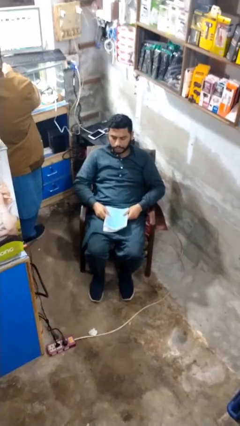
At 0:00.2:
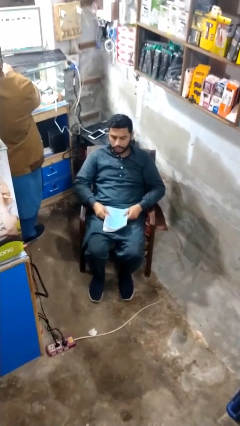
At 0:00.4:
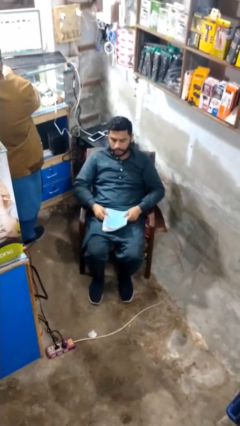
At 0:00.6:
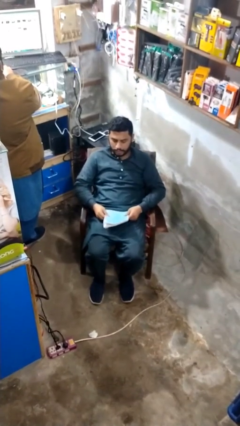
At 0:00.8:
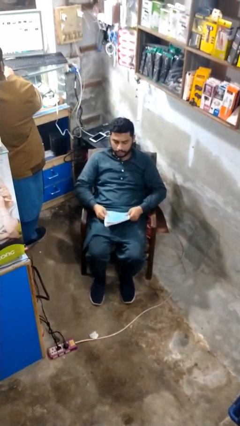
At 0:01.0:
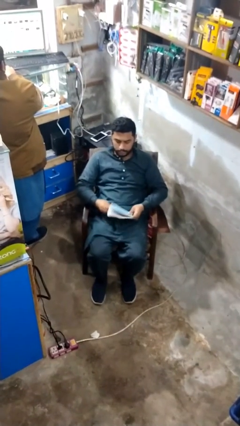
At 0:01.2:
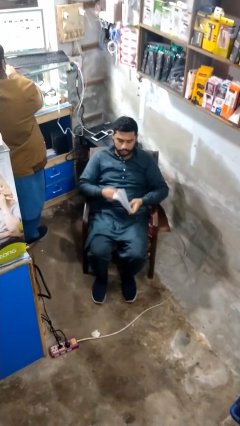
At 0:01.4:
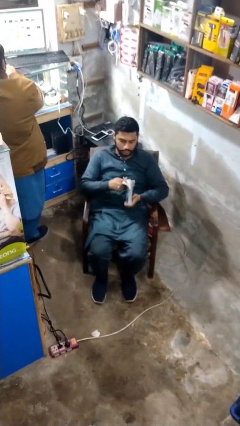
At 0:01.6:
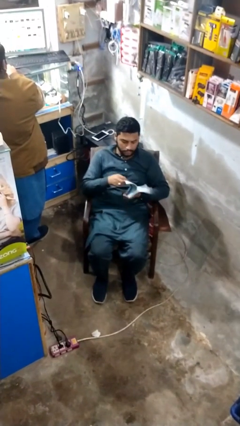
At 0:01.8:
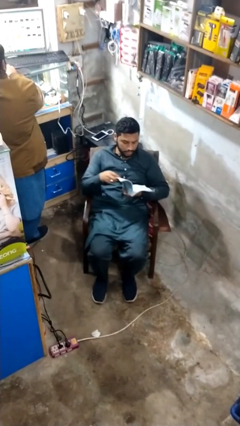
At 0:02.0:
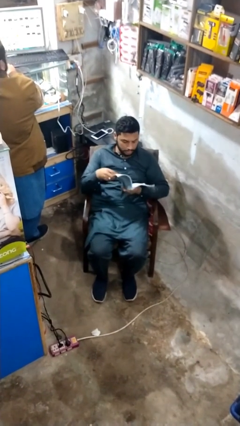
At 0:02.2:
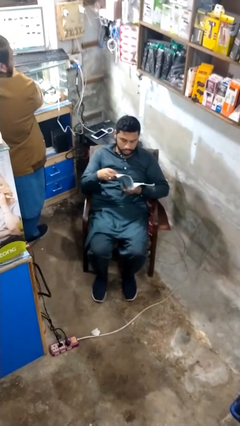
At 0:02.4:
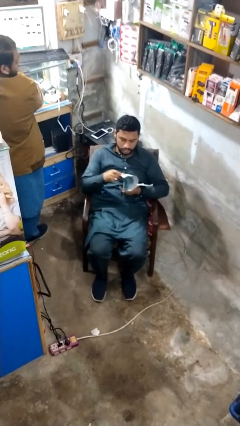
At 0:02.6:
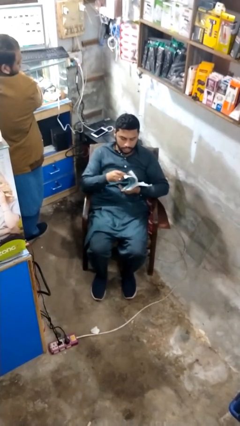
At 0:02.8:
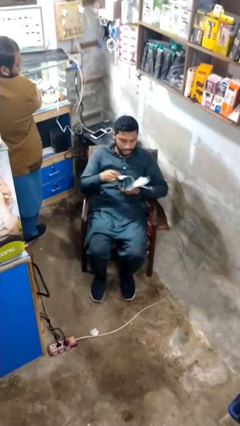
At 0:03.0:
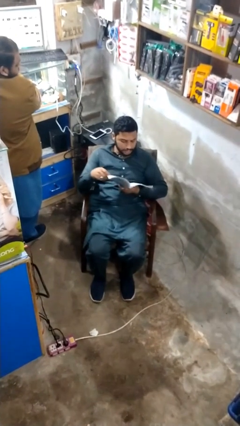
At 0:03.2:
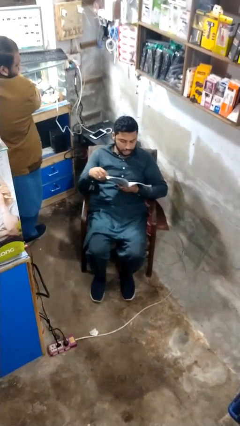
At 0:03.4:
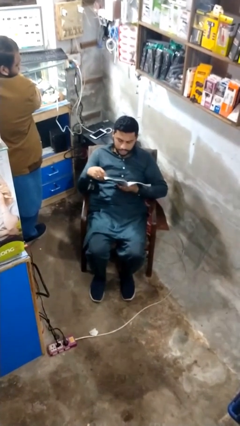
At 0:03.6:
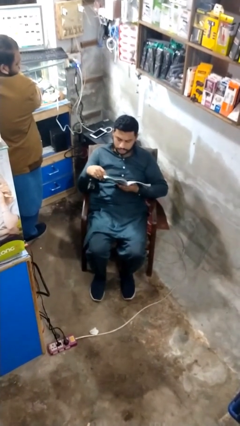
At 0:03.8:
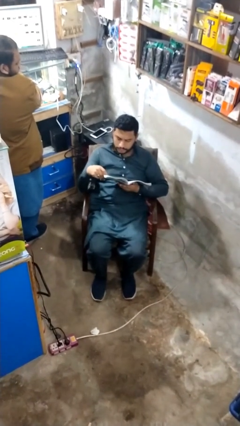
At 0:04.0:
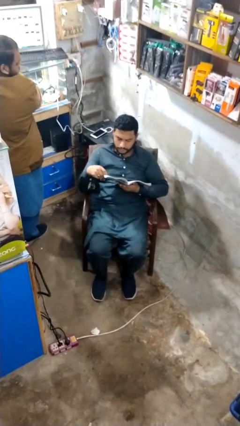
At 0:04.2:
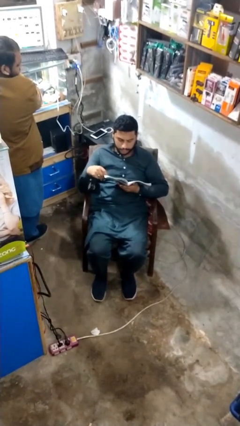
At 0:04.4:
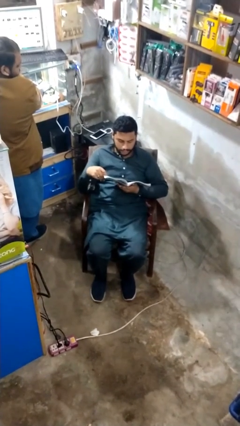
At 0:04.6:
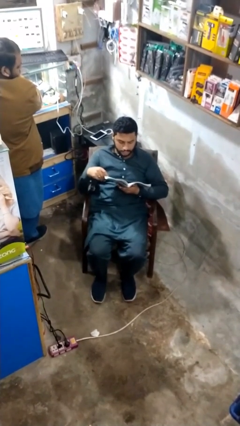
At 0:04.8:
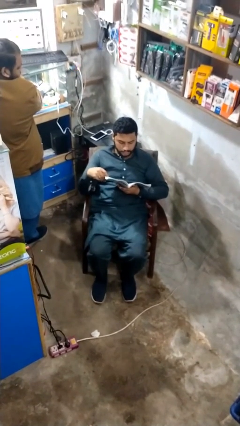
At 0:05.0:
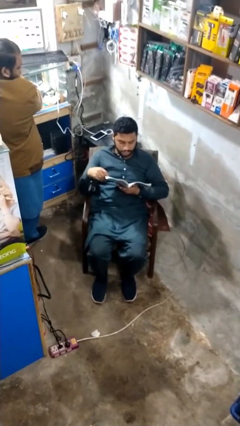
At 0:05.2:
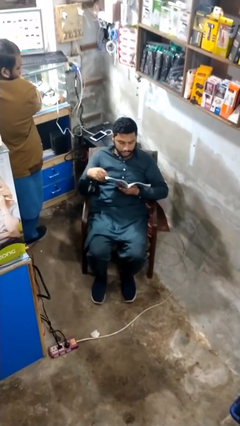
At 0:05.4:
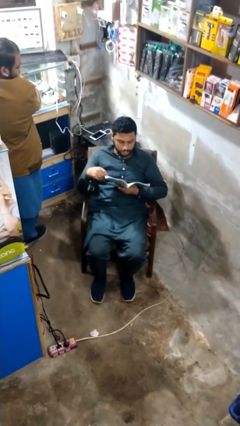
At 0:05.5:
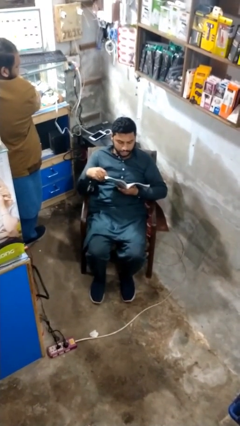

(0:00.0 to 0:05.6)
person reads document

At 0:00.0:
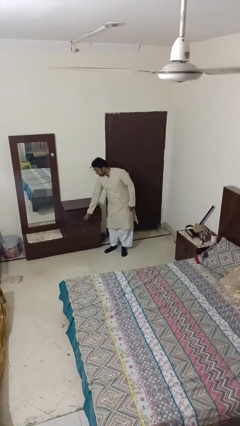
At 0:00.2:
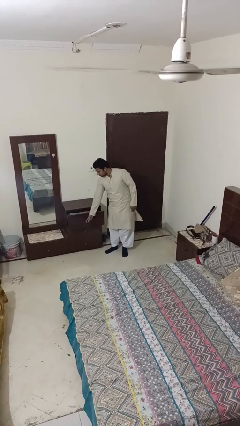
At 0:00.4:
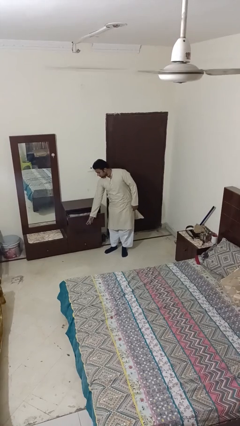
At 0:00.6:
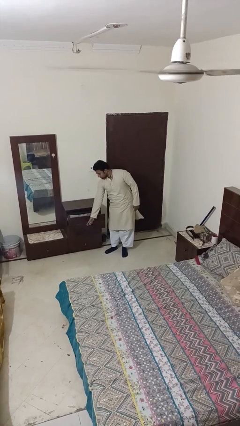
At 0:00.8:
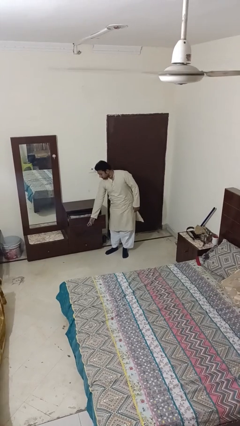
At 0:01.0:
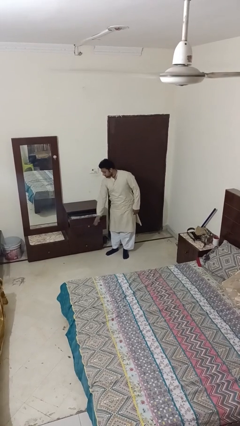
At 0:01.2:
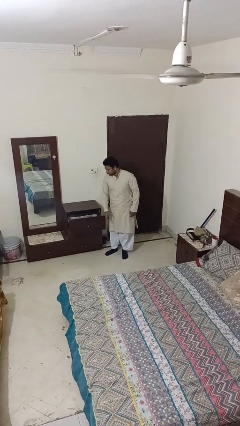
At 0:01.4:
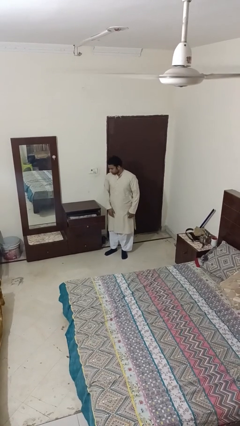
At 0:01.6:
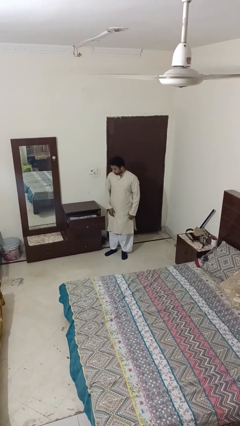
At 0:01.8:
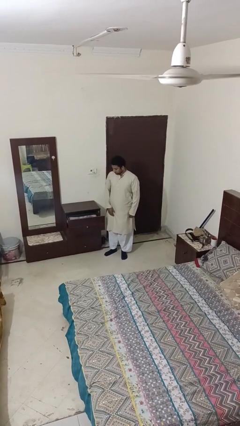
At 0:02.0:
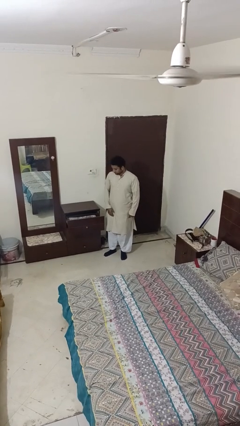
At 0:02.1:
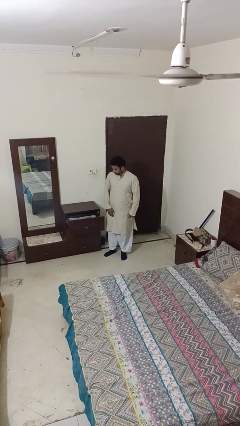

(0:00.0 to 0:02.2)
person opens dresser drawer

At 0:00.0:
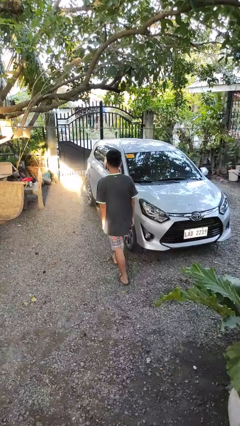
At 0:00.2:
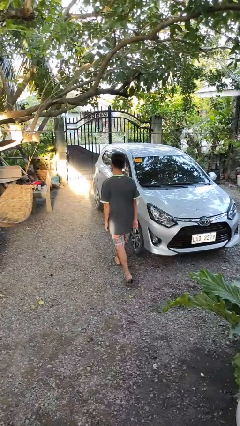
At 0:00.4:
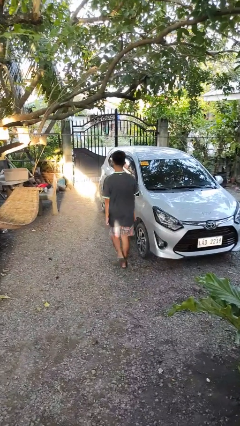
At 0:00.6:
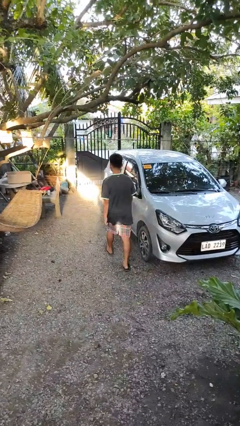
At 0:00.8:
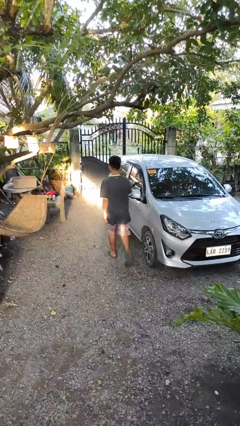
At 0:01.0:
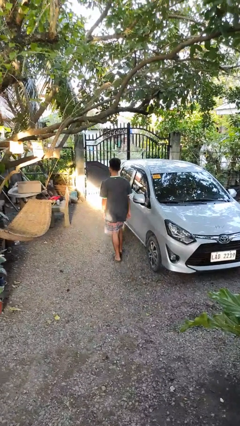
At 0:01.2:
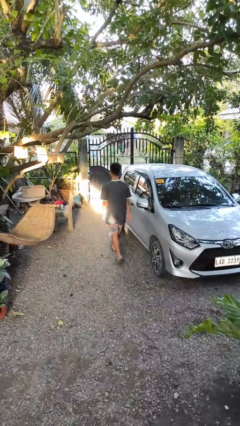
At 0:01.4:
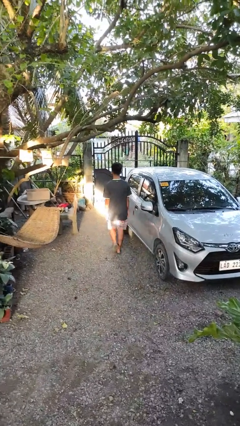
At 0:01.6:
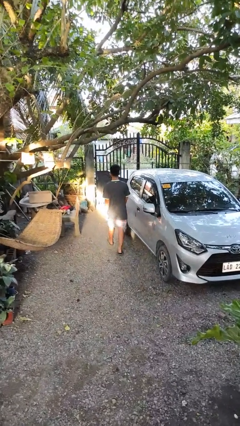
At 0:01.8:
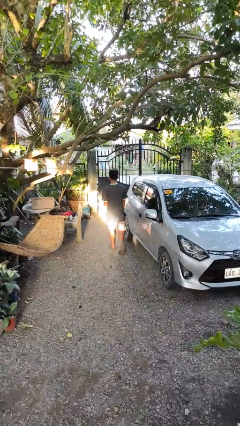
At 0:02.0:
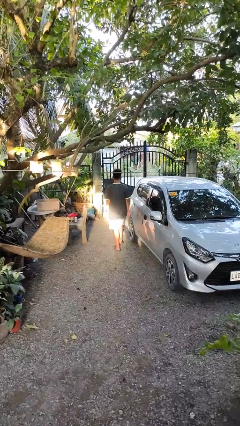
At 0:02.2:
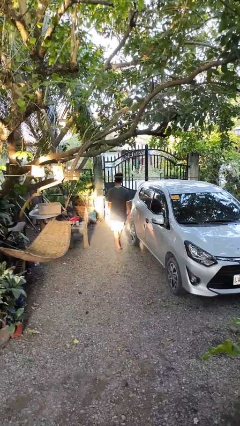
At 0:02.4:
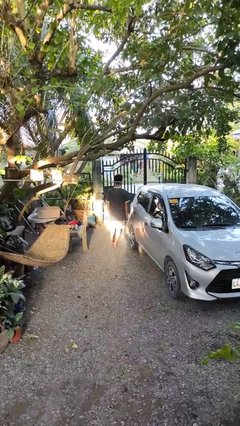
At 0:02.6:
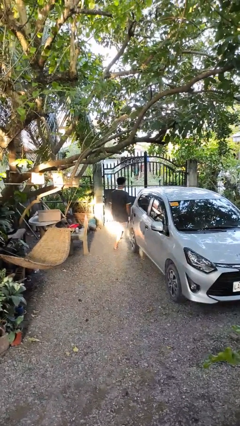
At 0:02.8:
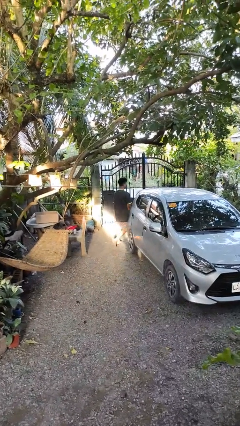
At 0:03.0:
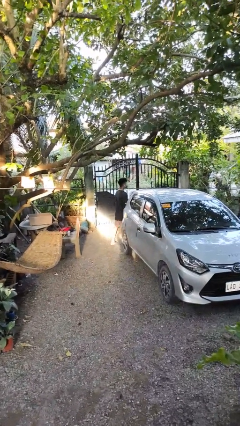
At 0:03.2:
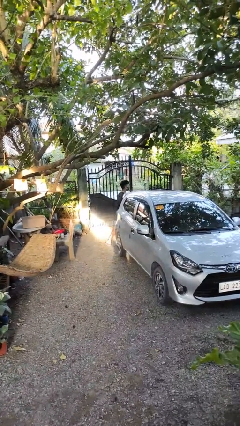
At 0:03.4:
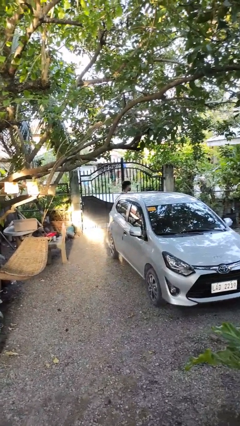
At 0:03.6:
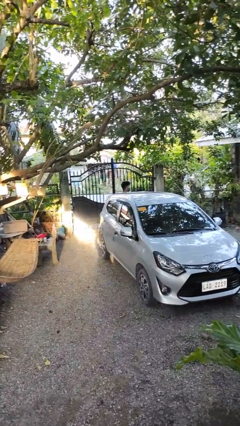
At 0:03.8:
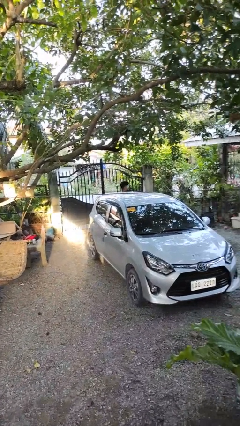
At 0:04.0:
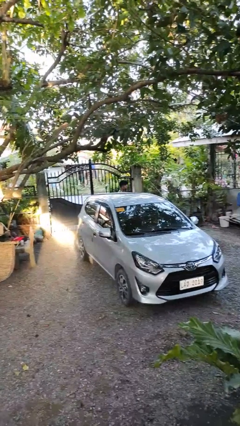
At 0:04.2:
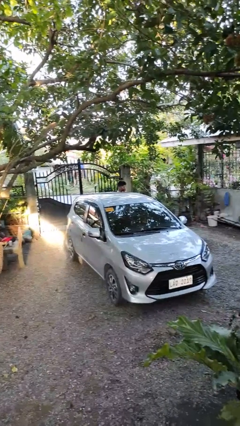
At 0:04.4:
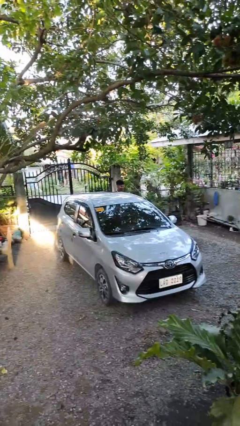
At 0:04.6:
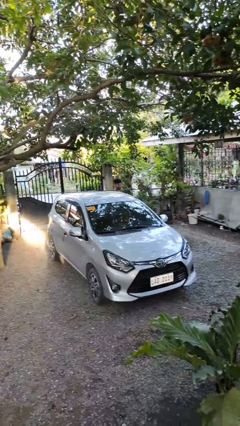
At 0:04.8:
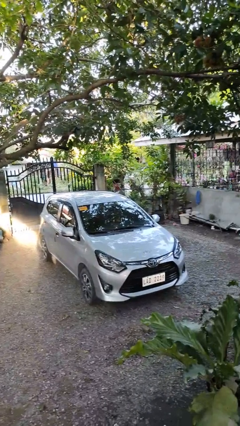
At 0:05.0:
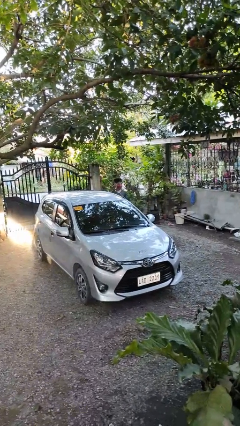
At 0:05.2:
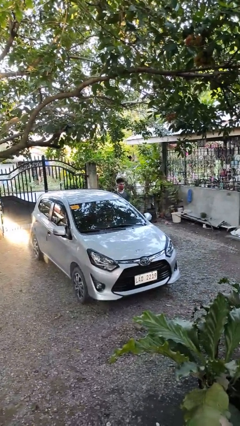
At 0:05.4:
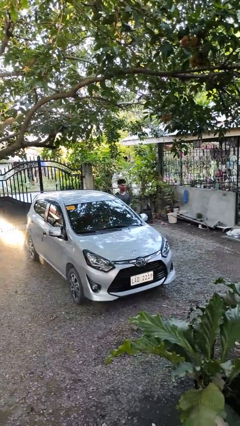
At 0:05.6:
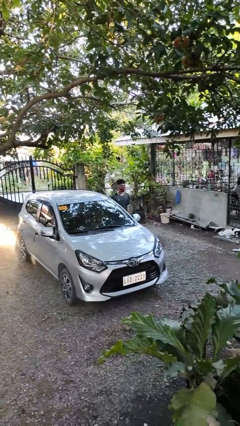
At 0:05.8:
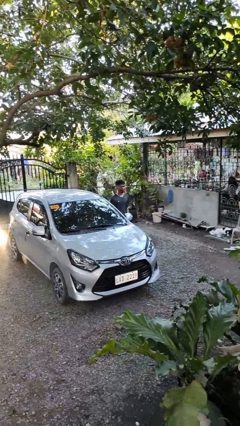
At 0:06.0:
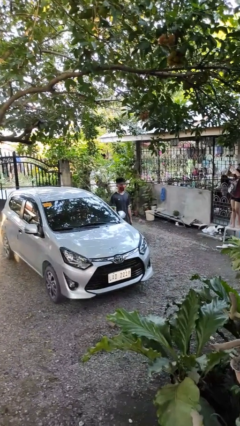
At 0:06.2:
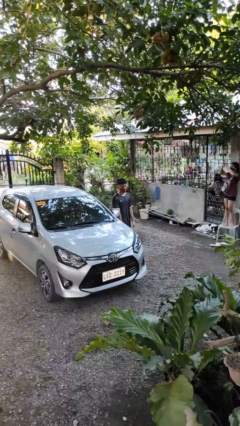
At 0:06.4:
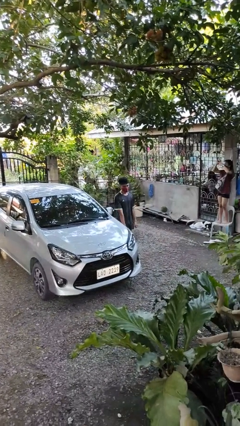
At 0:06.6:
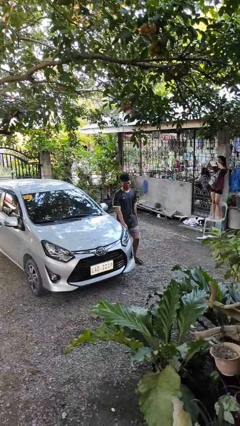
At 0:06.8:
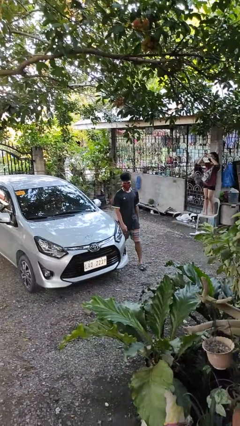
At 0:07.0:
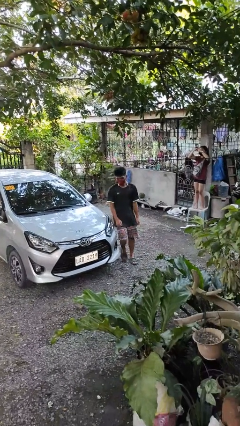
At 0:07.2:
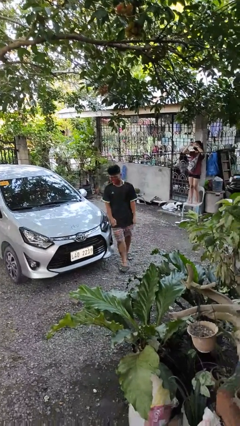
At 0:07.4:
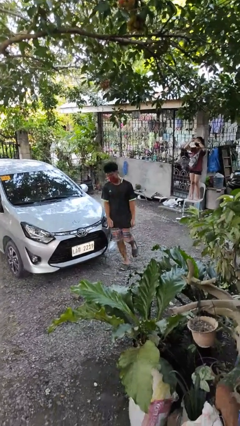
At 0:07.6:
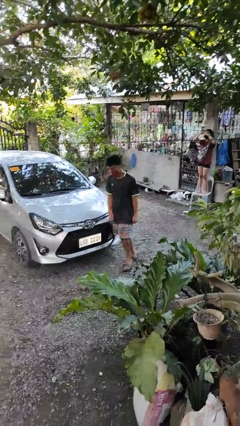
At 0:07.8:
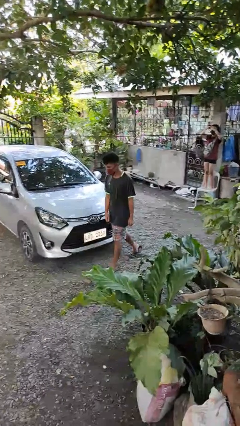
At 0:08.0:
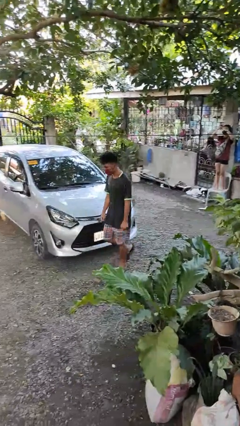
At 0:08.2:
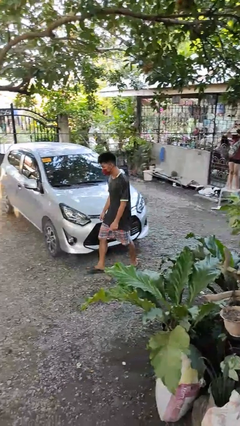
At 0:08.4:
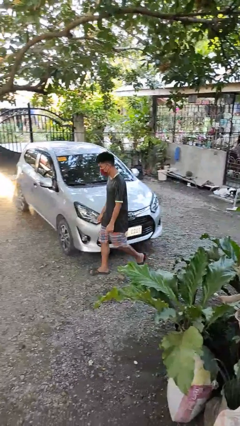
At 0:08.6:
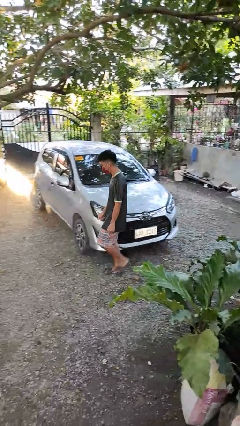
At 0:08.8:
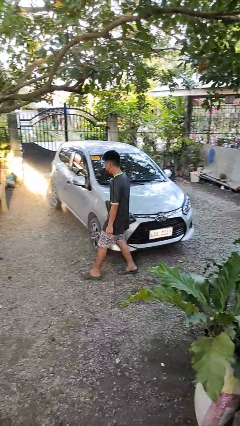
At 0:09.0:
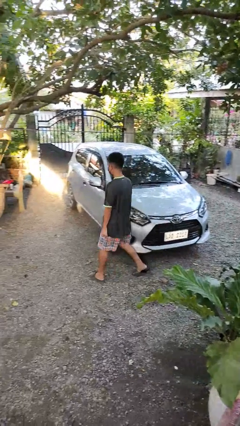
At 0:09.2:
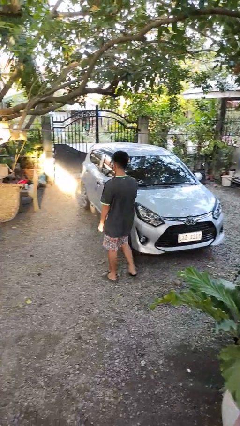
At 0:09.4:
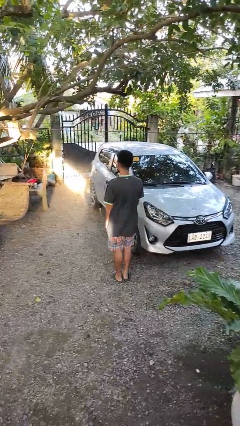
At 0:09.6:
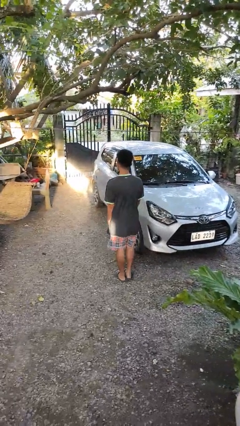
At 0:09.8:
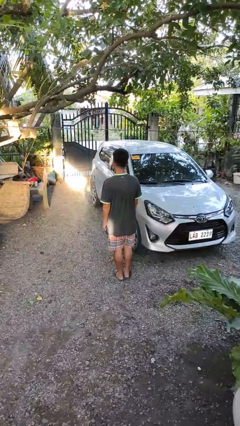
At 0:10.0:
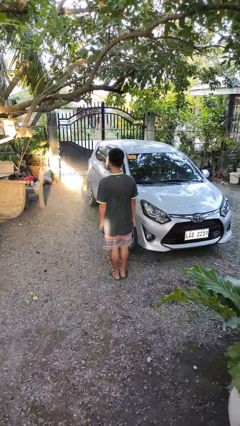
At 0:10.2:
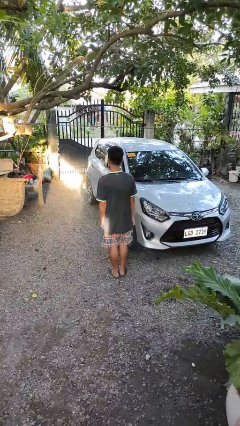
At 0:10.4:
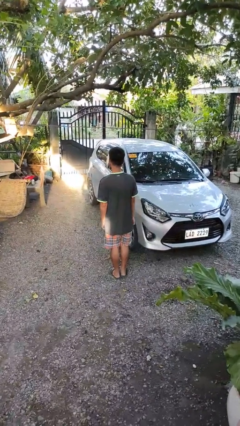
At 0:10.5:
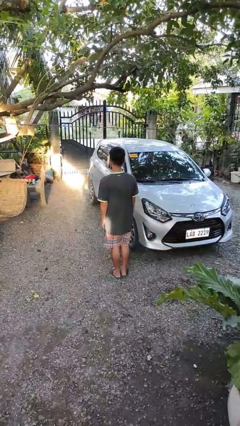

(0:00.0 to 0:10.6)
person walks around car
